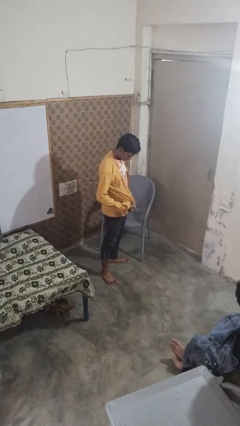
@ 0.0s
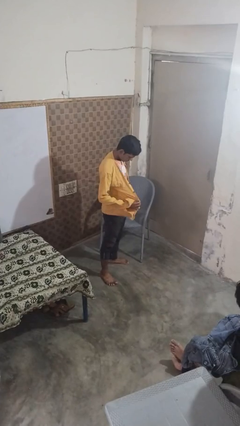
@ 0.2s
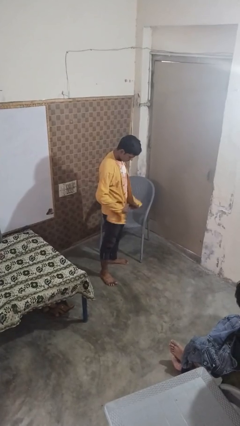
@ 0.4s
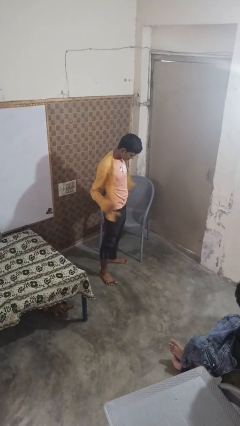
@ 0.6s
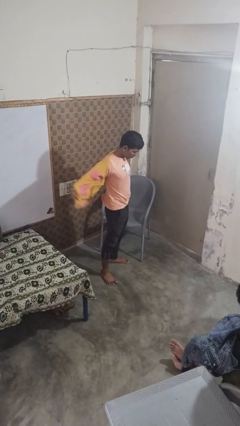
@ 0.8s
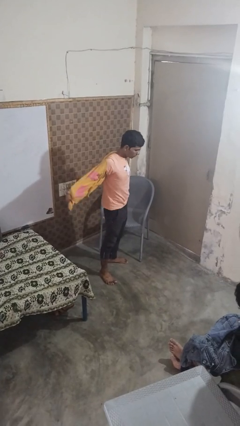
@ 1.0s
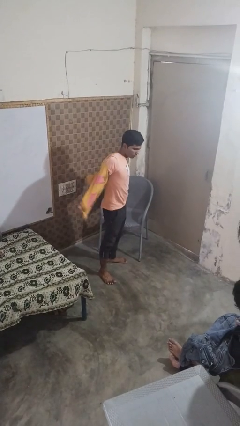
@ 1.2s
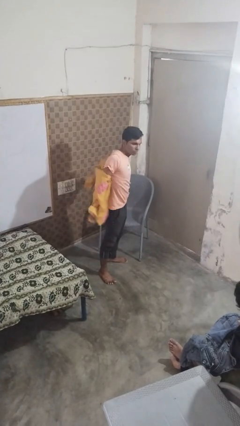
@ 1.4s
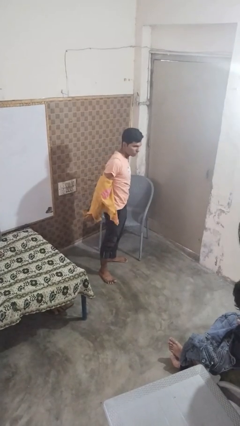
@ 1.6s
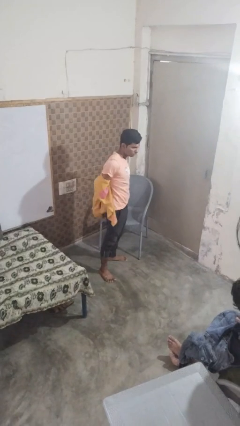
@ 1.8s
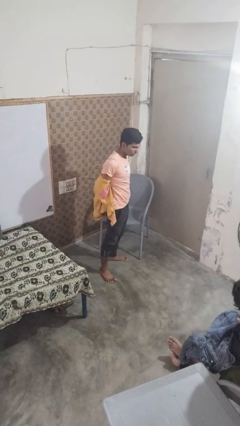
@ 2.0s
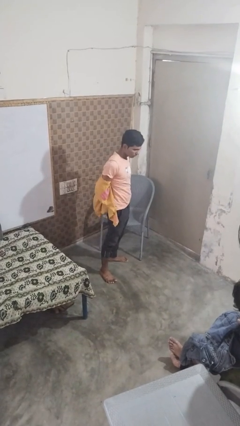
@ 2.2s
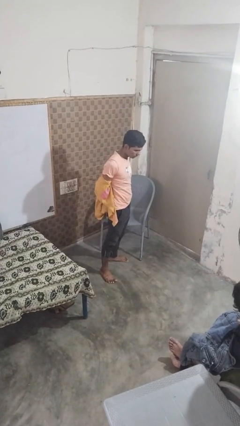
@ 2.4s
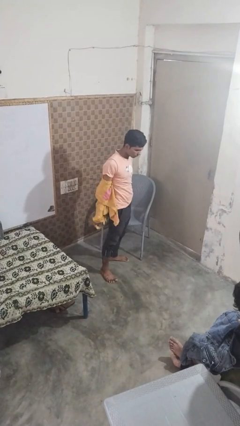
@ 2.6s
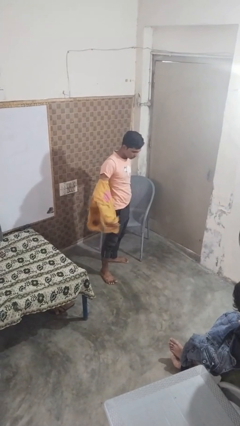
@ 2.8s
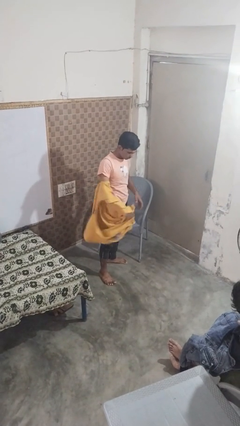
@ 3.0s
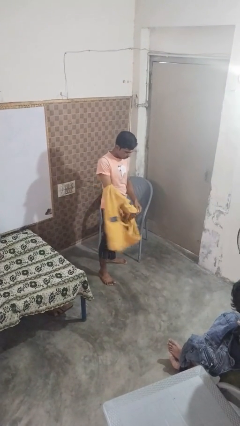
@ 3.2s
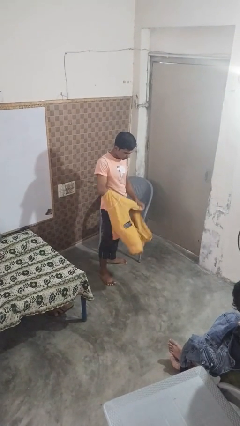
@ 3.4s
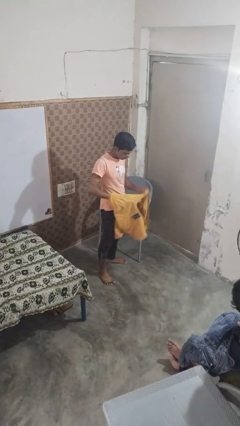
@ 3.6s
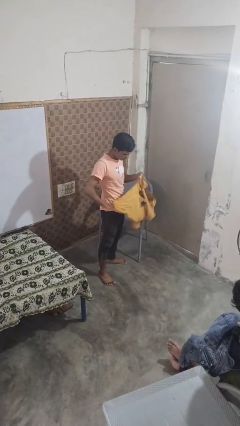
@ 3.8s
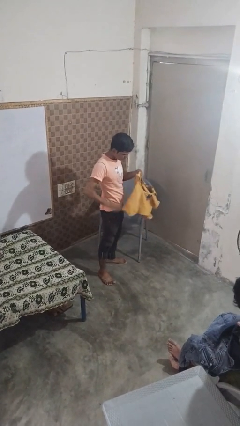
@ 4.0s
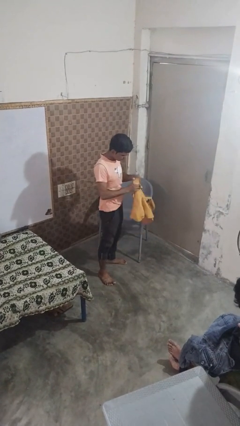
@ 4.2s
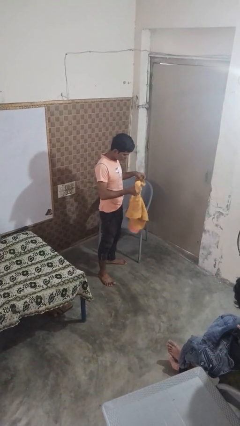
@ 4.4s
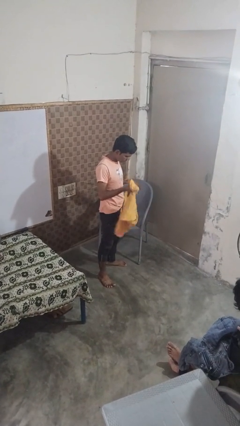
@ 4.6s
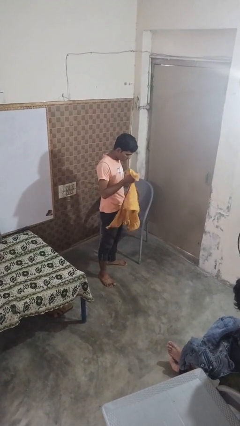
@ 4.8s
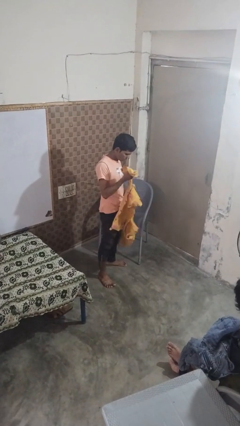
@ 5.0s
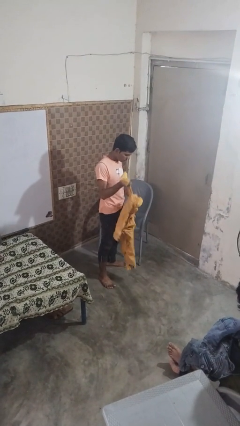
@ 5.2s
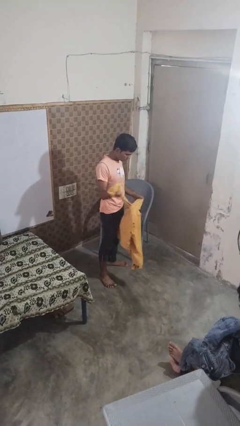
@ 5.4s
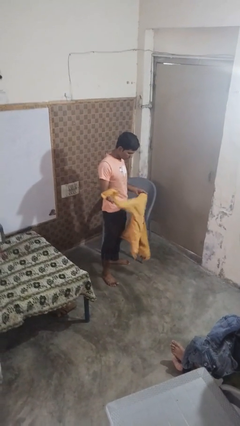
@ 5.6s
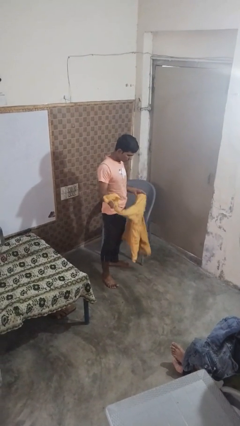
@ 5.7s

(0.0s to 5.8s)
person takes off shirt

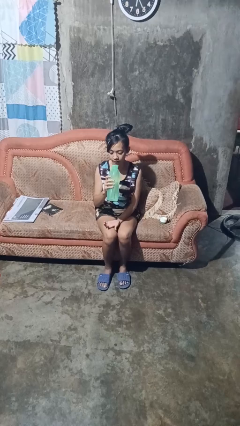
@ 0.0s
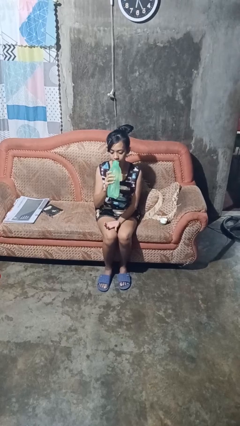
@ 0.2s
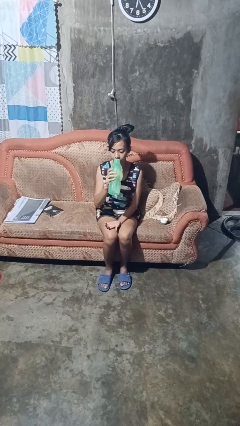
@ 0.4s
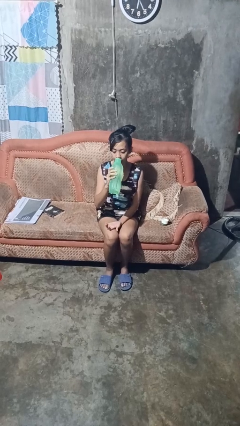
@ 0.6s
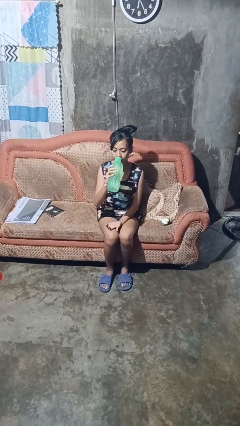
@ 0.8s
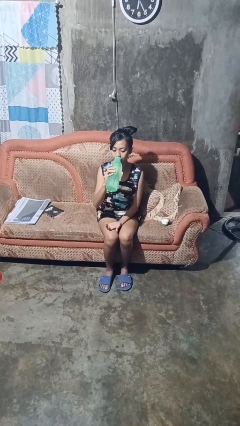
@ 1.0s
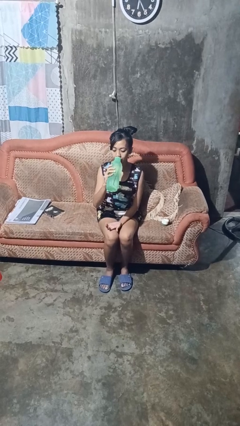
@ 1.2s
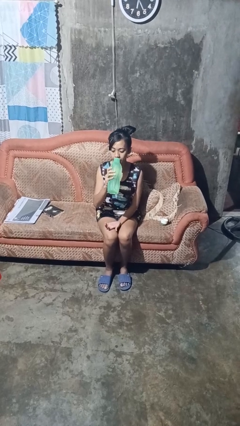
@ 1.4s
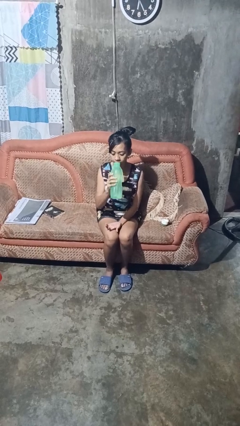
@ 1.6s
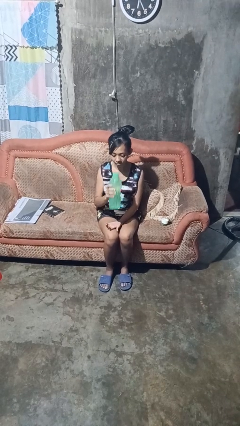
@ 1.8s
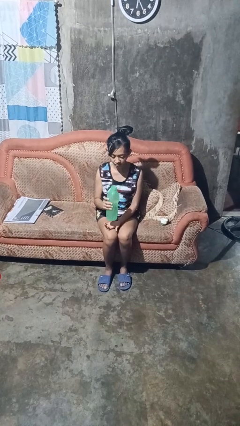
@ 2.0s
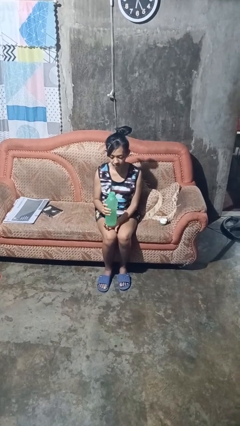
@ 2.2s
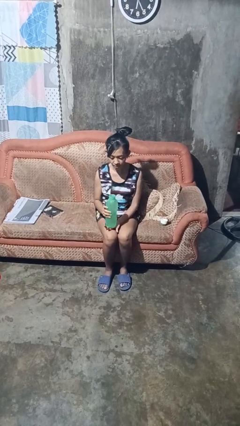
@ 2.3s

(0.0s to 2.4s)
person drinks from bottle

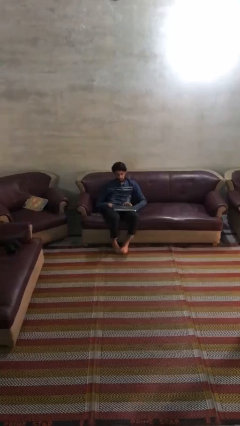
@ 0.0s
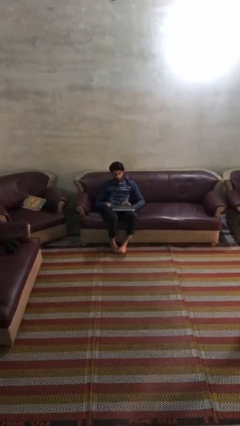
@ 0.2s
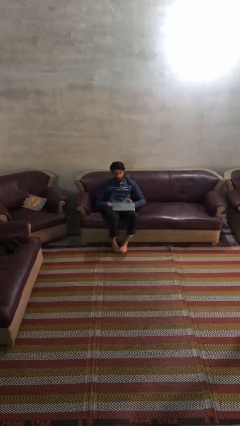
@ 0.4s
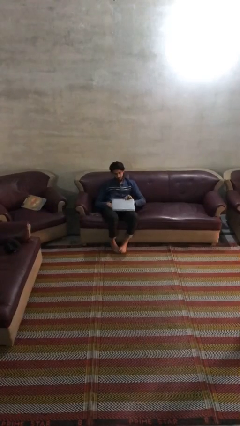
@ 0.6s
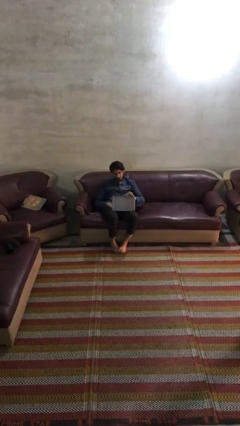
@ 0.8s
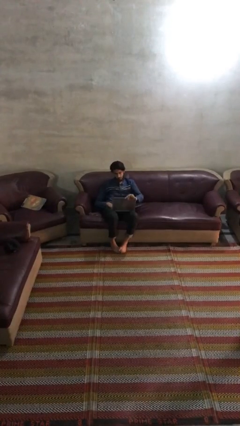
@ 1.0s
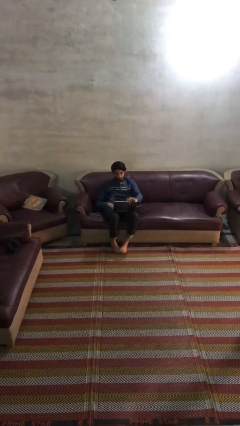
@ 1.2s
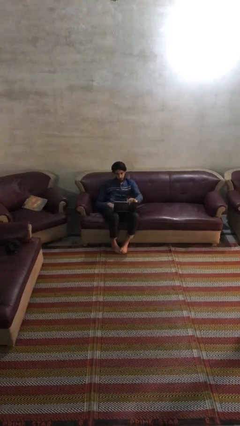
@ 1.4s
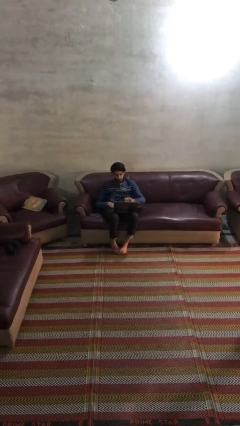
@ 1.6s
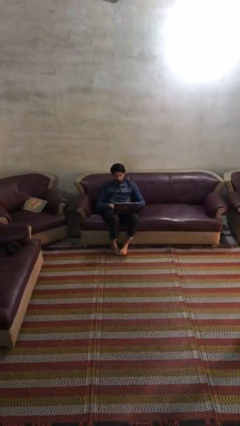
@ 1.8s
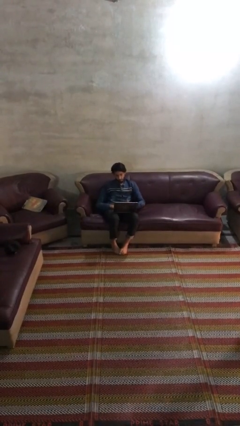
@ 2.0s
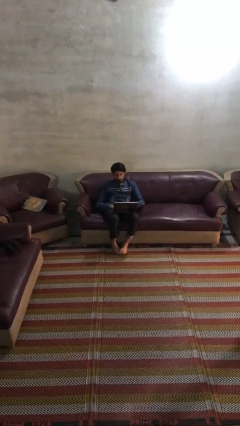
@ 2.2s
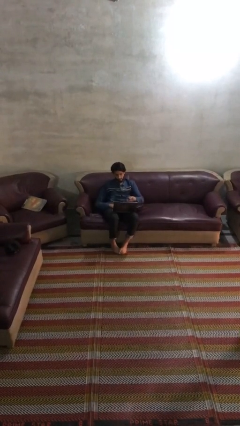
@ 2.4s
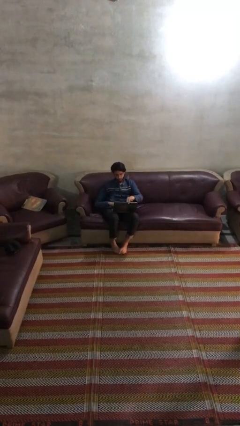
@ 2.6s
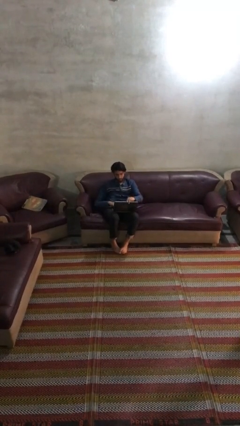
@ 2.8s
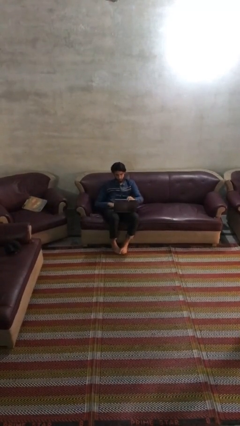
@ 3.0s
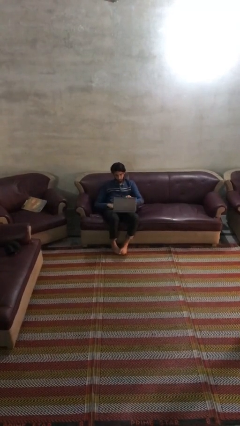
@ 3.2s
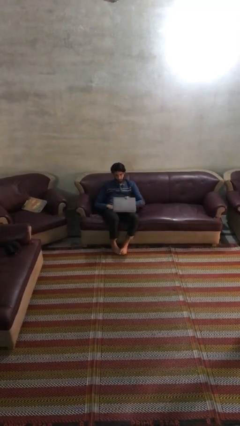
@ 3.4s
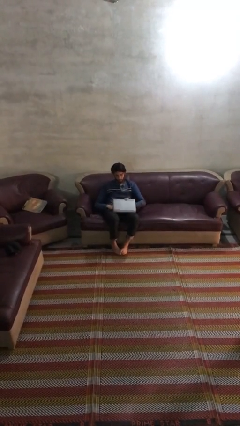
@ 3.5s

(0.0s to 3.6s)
person interacts with laptop

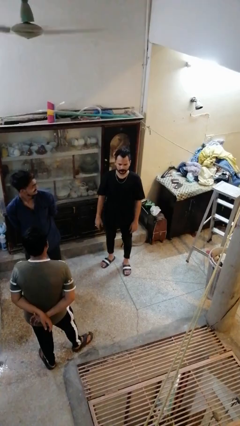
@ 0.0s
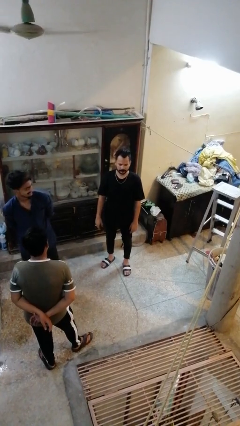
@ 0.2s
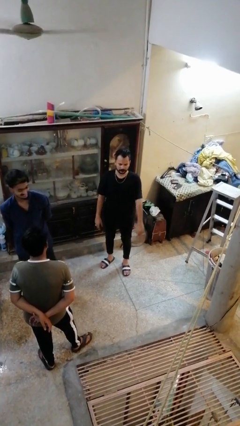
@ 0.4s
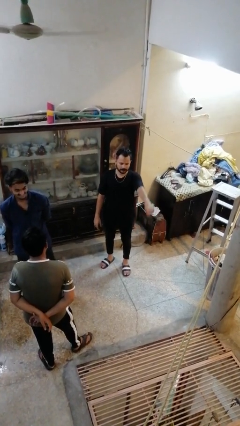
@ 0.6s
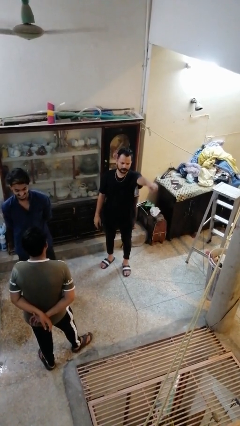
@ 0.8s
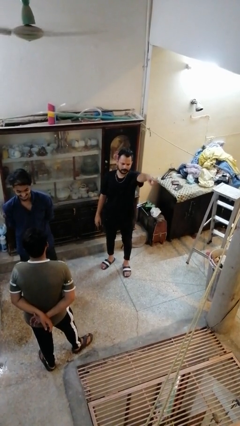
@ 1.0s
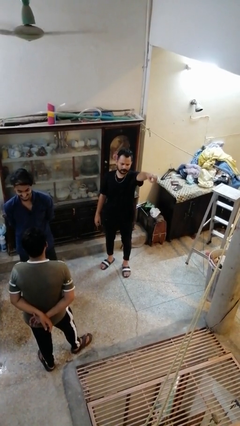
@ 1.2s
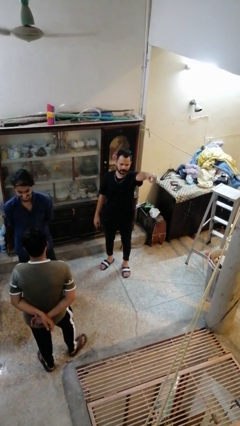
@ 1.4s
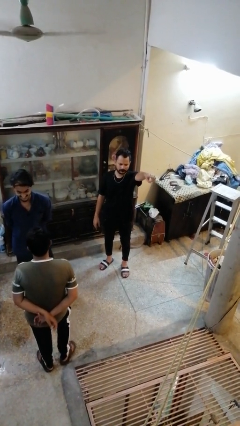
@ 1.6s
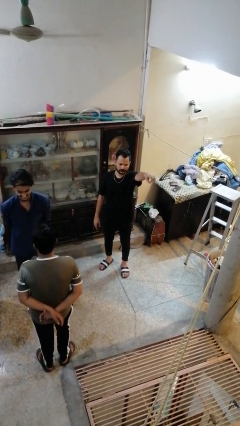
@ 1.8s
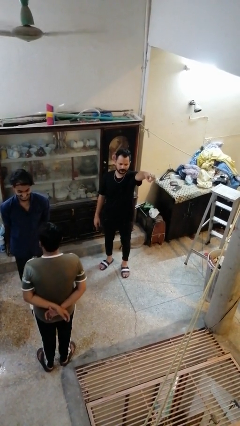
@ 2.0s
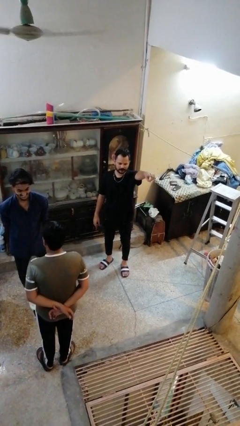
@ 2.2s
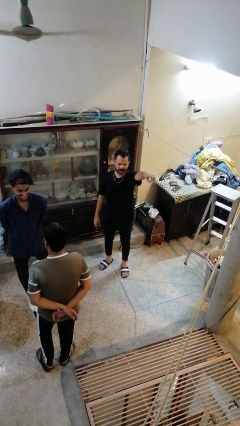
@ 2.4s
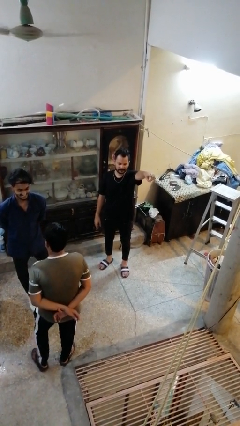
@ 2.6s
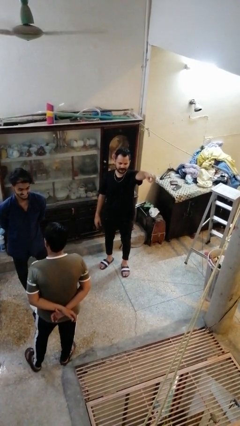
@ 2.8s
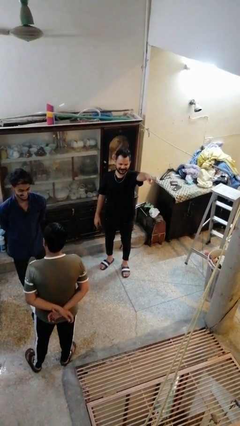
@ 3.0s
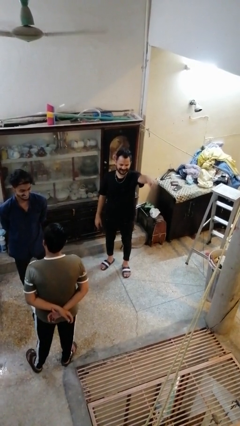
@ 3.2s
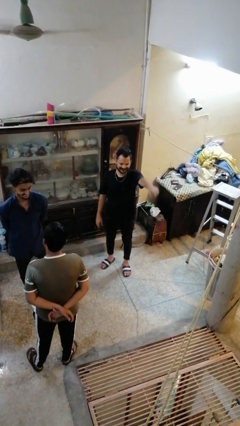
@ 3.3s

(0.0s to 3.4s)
person points at person

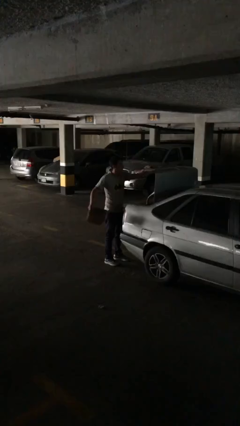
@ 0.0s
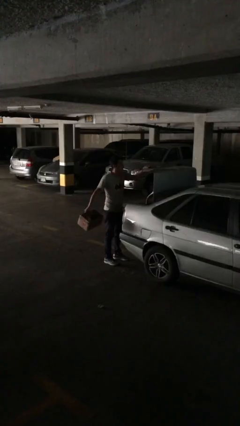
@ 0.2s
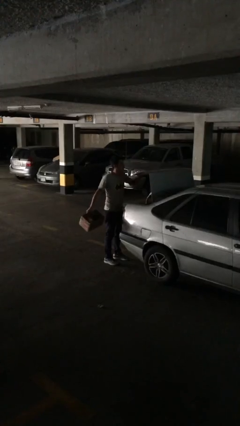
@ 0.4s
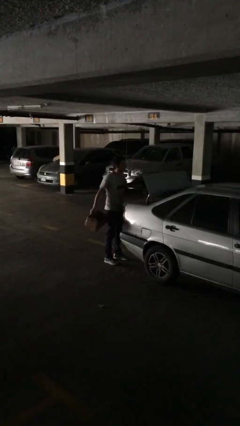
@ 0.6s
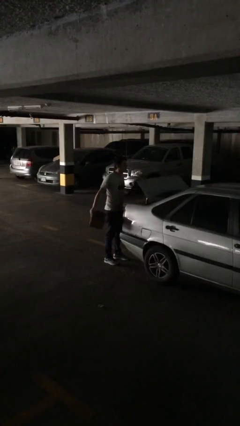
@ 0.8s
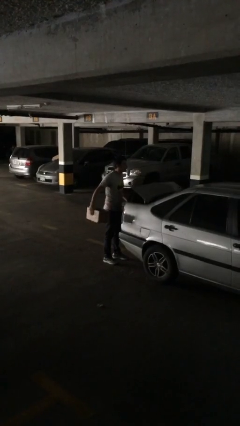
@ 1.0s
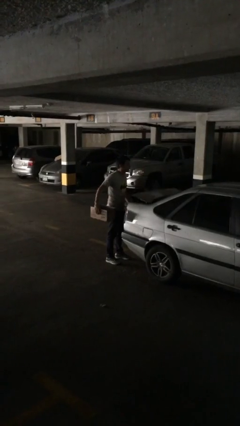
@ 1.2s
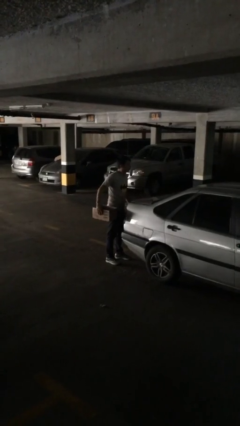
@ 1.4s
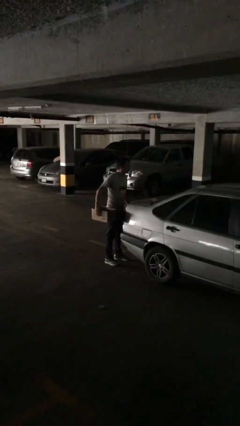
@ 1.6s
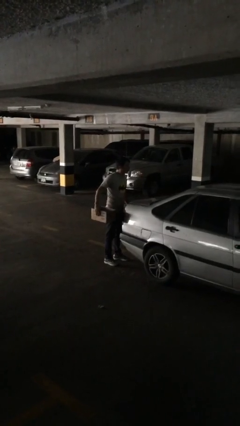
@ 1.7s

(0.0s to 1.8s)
person closes car trunk

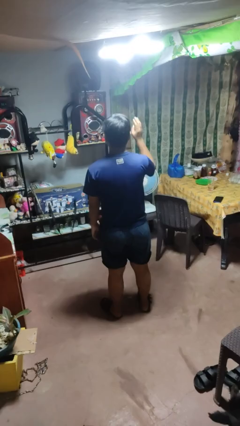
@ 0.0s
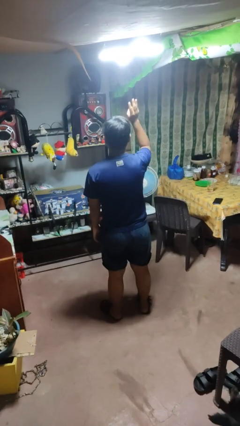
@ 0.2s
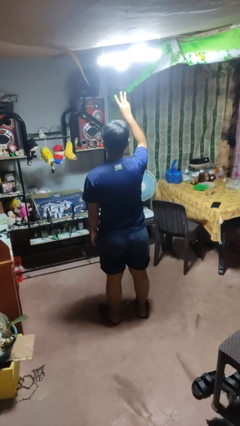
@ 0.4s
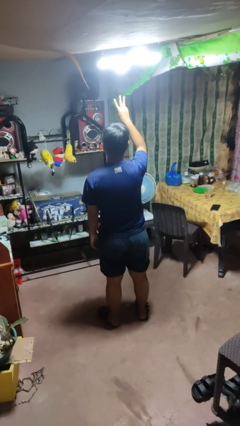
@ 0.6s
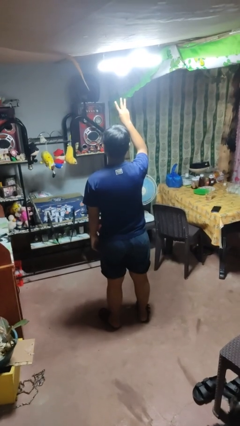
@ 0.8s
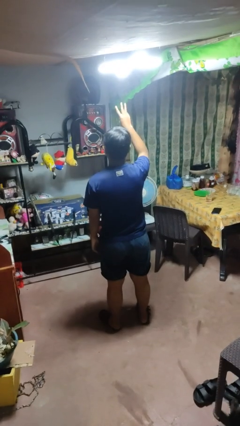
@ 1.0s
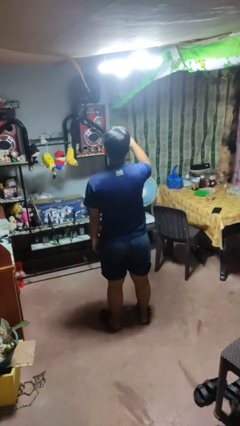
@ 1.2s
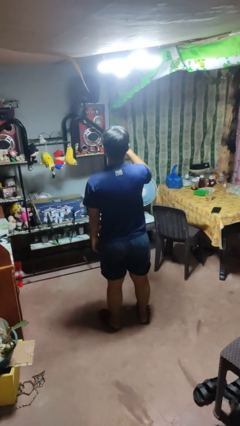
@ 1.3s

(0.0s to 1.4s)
person gestures number three
